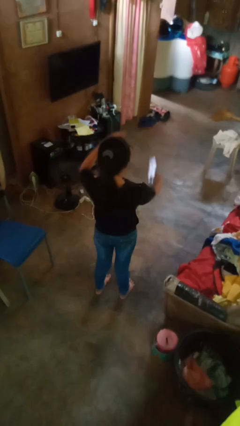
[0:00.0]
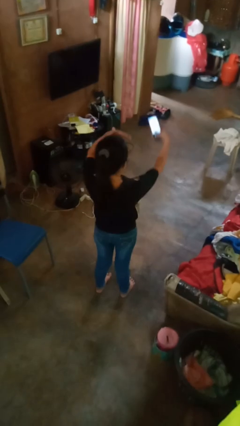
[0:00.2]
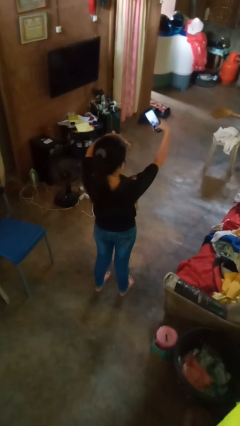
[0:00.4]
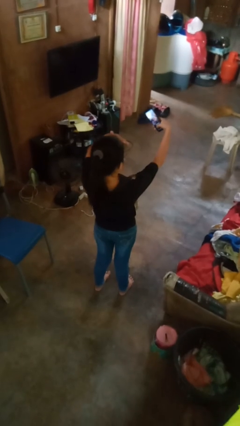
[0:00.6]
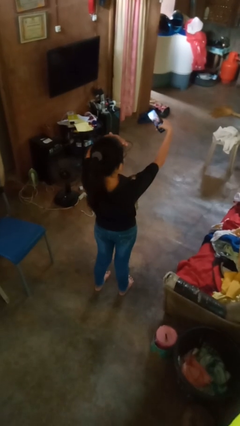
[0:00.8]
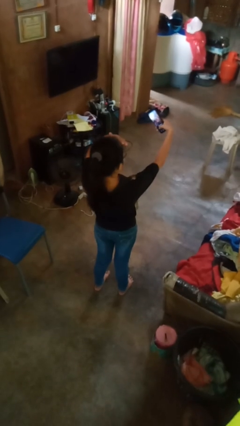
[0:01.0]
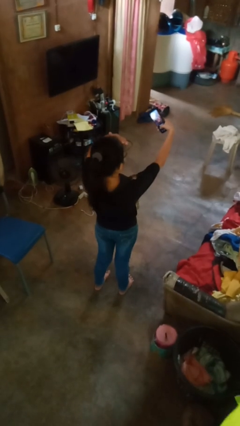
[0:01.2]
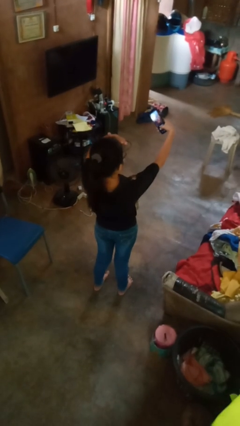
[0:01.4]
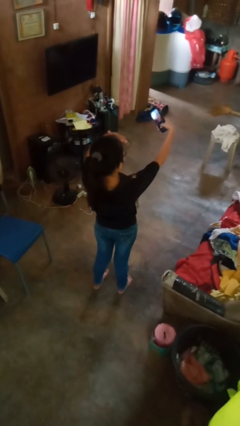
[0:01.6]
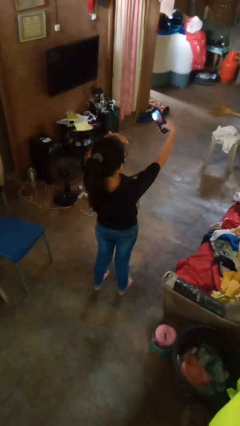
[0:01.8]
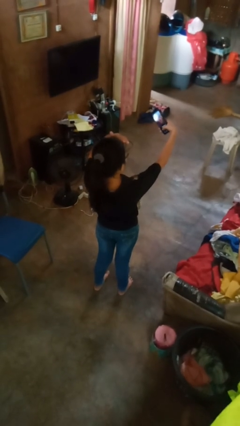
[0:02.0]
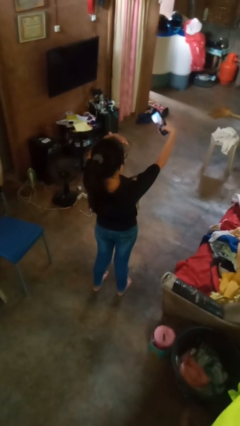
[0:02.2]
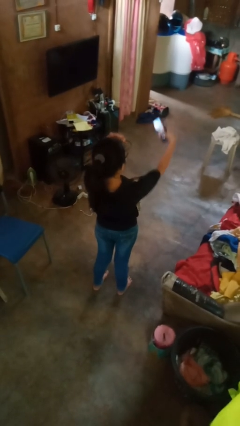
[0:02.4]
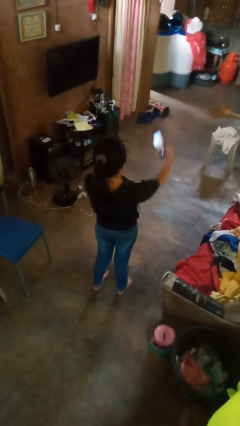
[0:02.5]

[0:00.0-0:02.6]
person takes selfie

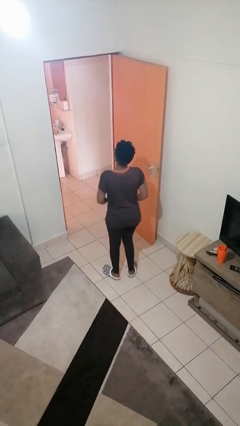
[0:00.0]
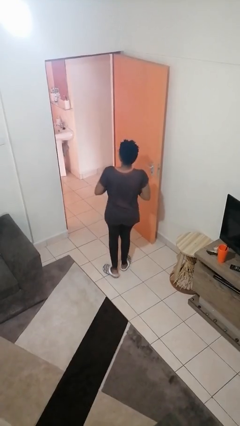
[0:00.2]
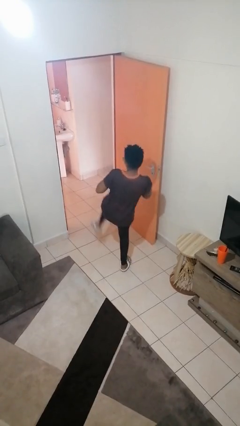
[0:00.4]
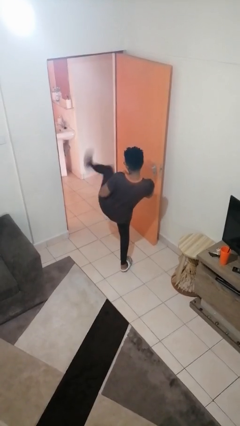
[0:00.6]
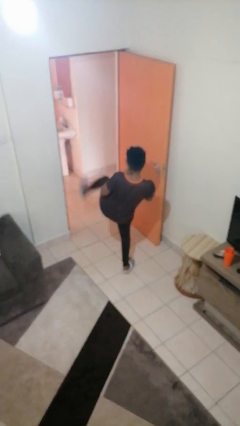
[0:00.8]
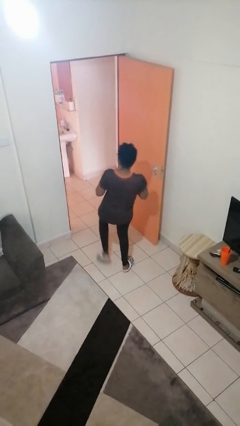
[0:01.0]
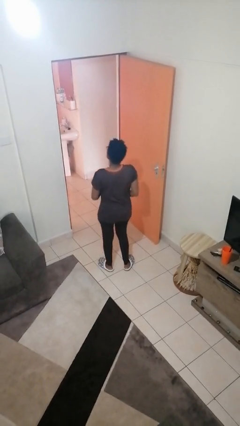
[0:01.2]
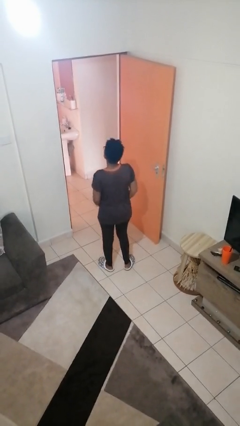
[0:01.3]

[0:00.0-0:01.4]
person karate kicks

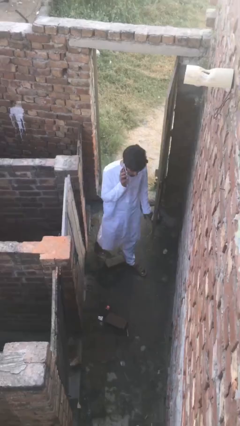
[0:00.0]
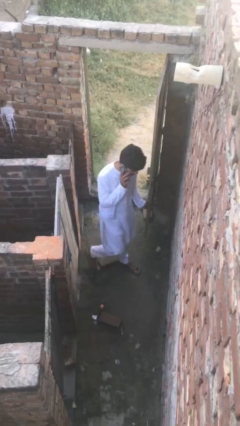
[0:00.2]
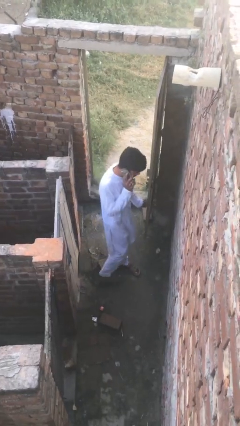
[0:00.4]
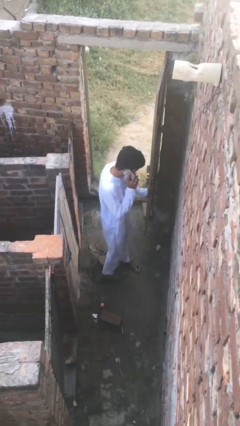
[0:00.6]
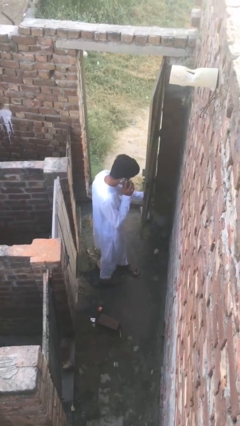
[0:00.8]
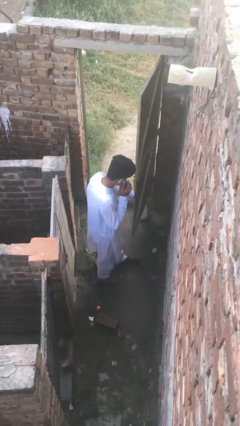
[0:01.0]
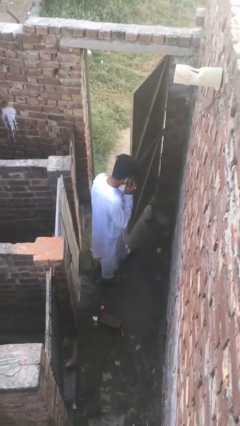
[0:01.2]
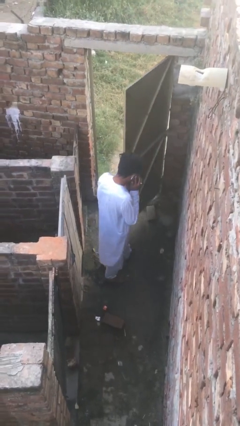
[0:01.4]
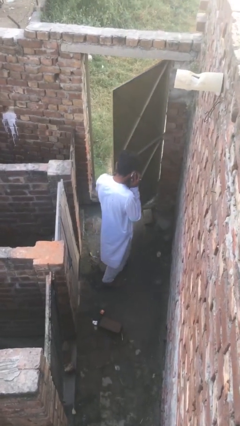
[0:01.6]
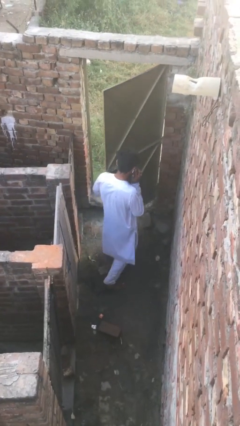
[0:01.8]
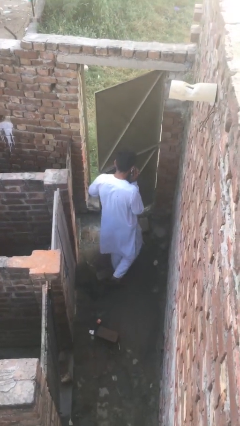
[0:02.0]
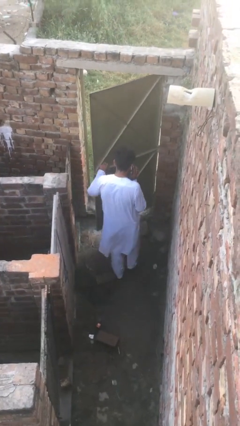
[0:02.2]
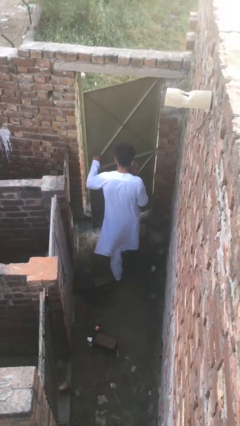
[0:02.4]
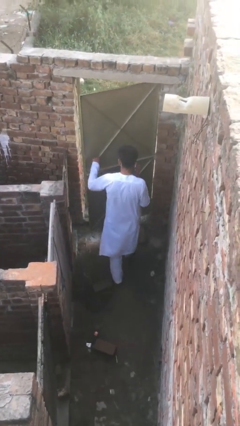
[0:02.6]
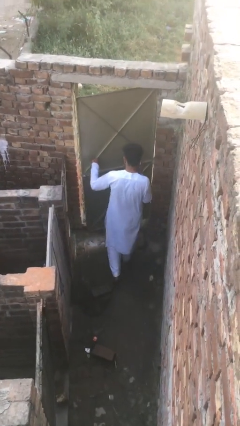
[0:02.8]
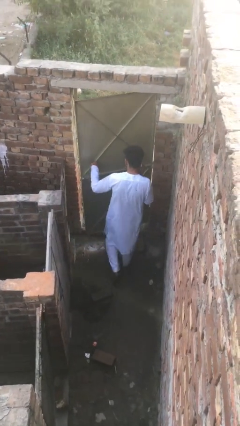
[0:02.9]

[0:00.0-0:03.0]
person closes facility door

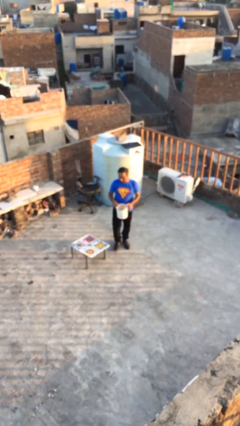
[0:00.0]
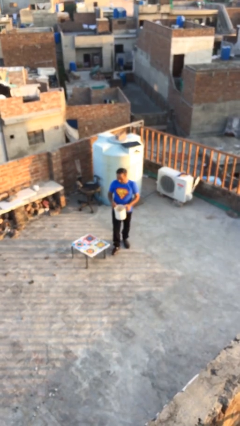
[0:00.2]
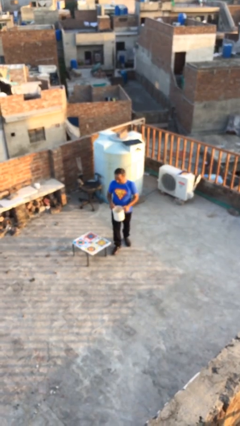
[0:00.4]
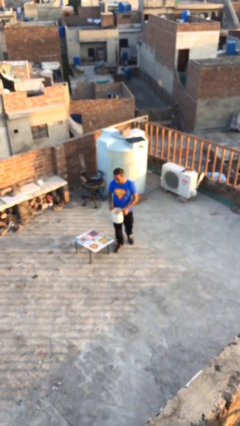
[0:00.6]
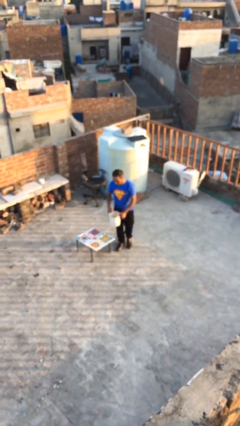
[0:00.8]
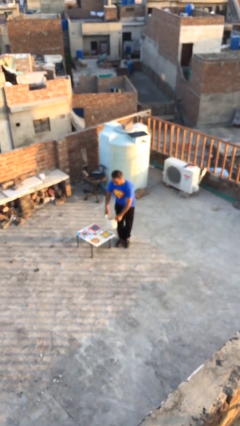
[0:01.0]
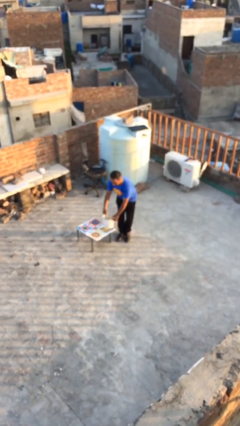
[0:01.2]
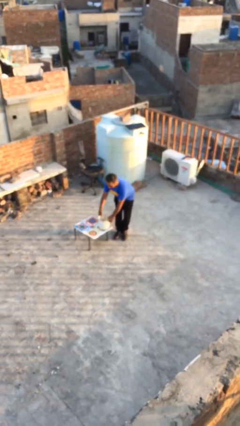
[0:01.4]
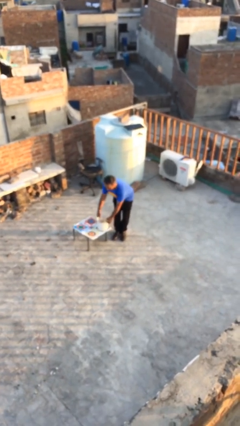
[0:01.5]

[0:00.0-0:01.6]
person puts down object on table

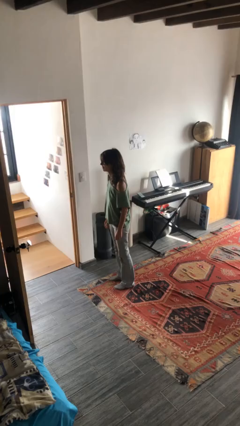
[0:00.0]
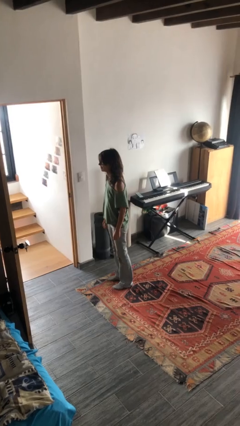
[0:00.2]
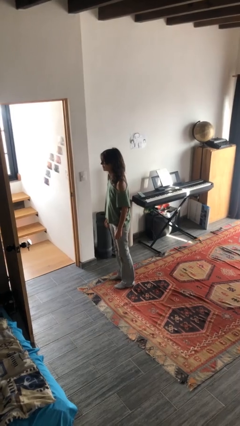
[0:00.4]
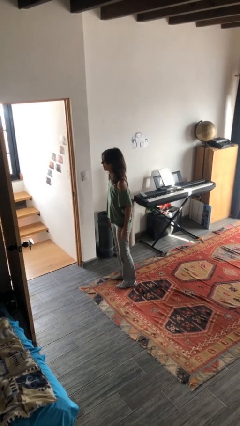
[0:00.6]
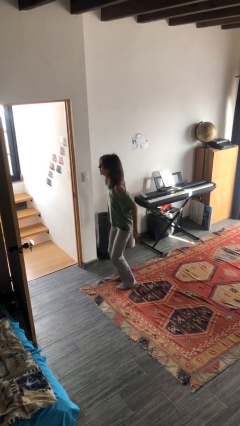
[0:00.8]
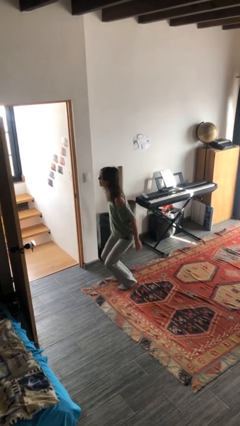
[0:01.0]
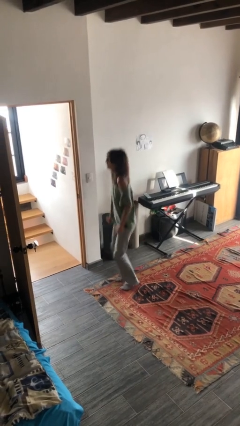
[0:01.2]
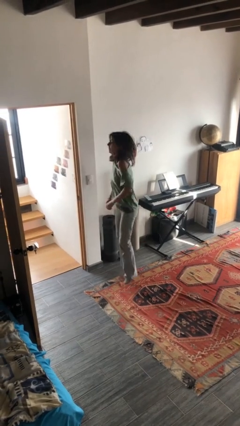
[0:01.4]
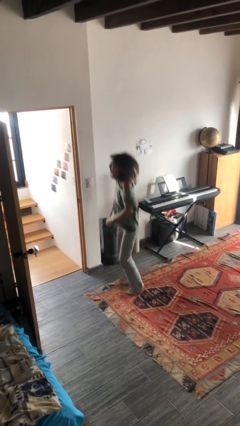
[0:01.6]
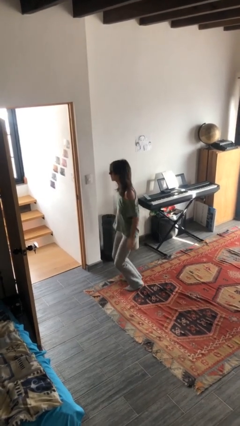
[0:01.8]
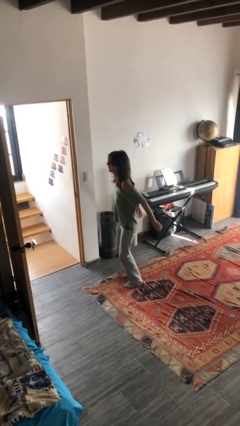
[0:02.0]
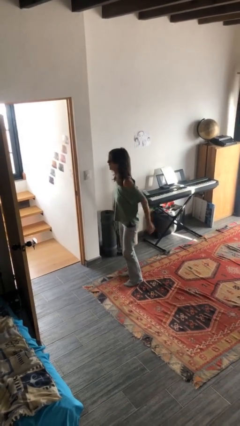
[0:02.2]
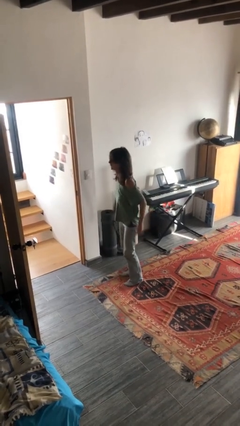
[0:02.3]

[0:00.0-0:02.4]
person jumps

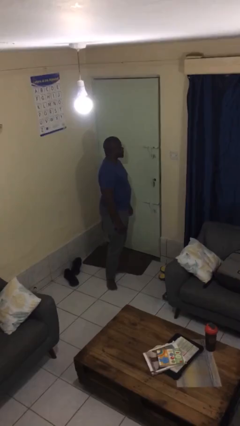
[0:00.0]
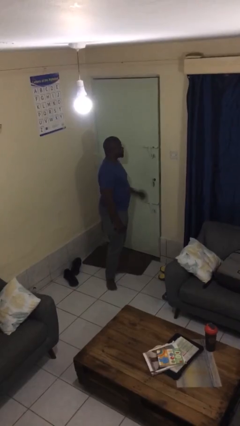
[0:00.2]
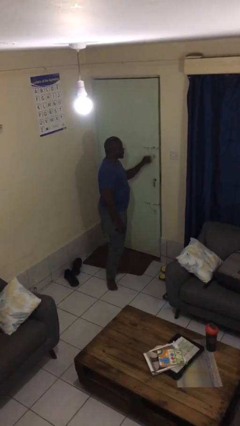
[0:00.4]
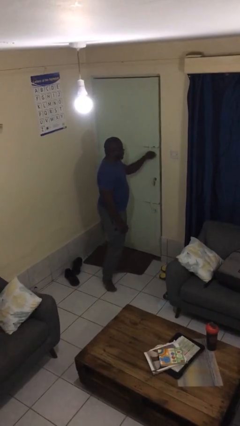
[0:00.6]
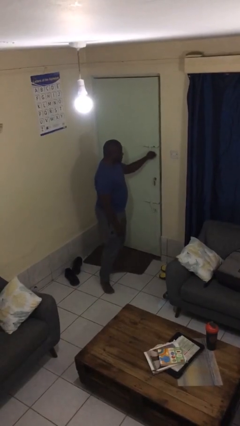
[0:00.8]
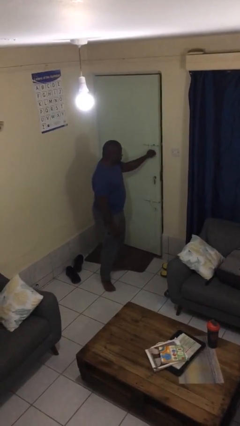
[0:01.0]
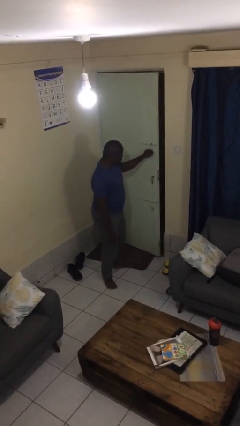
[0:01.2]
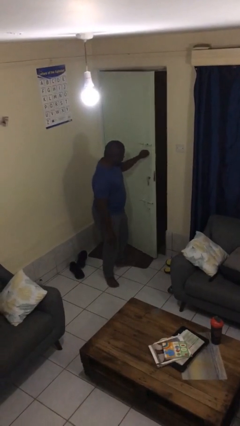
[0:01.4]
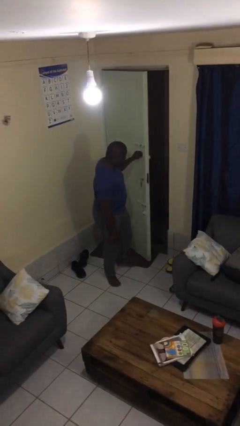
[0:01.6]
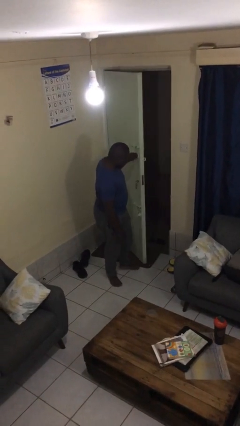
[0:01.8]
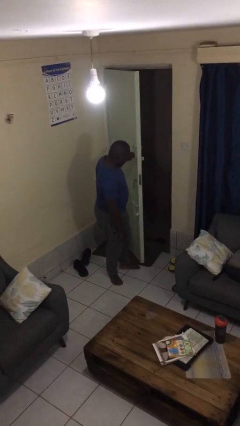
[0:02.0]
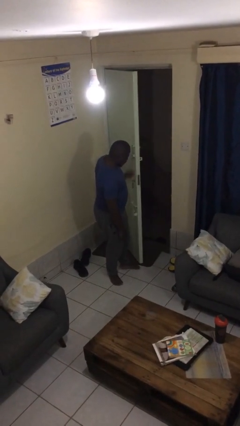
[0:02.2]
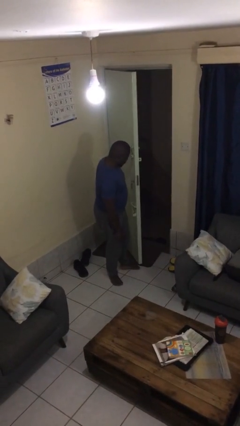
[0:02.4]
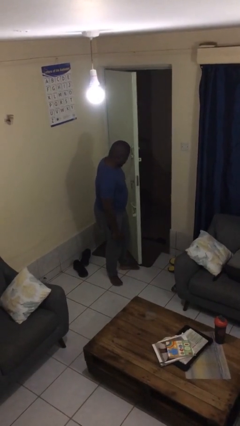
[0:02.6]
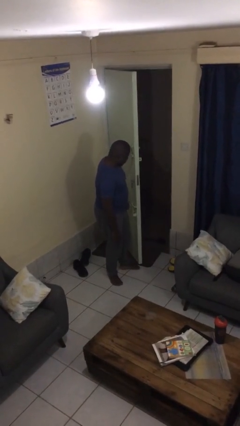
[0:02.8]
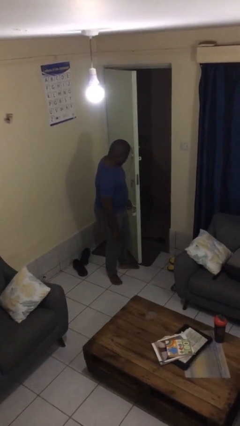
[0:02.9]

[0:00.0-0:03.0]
person opens facility door

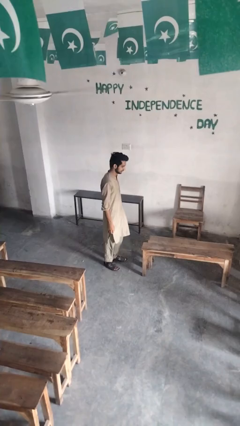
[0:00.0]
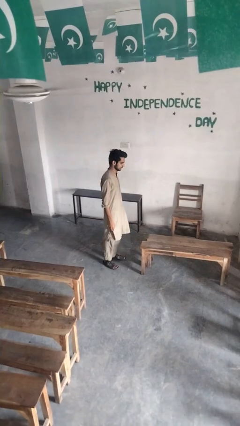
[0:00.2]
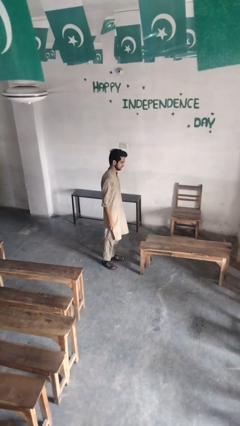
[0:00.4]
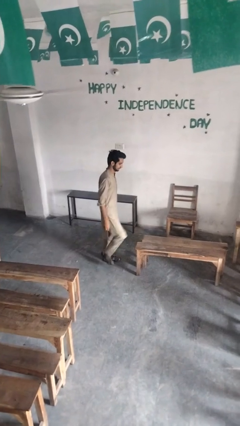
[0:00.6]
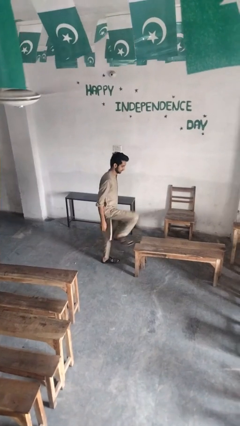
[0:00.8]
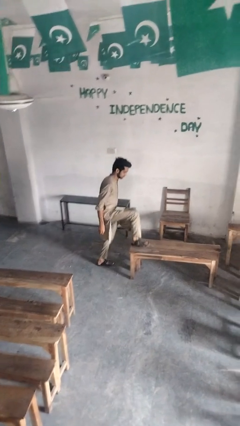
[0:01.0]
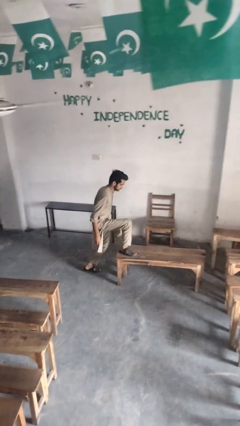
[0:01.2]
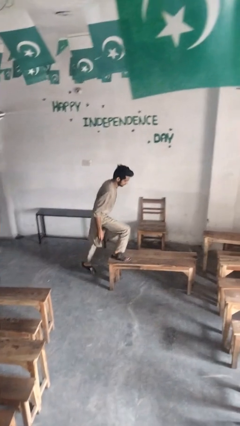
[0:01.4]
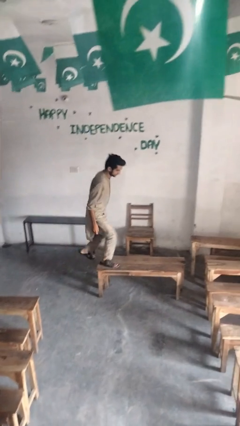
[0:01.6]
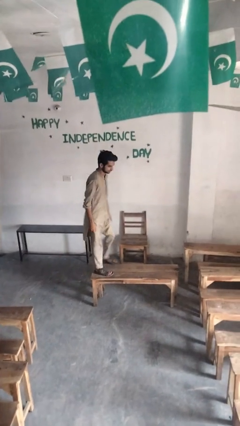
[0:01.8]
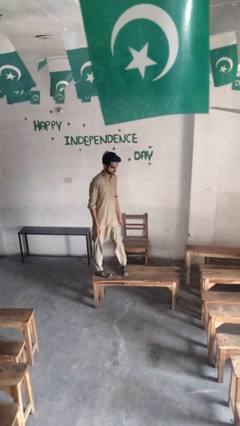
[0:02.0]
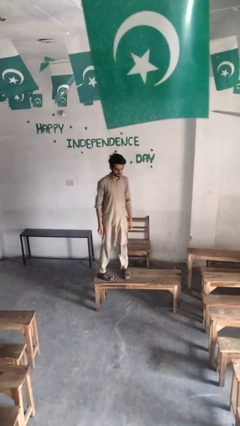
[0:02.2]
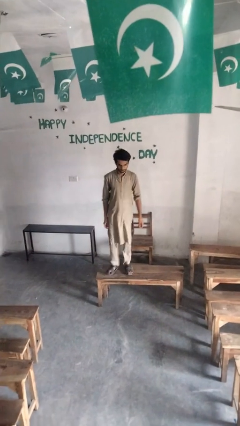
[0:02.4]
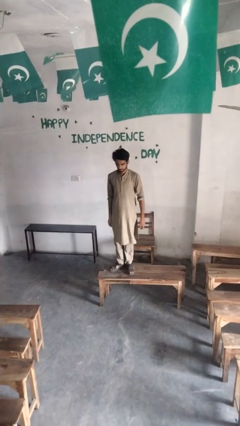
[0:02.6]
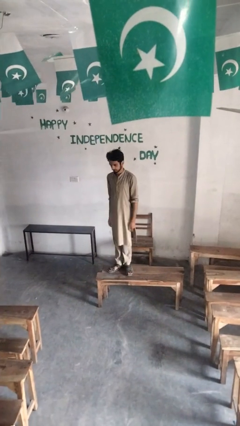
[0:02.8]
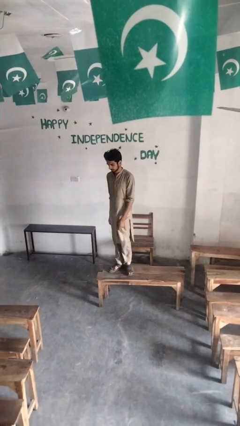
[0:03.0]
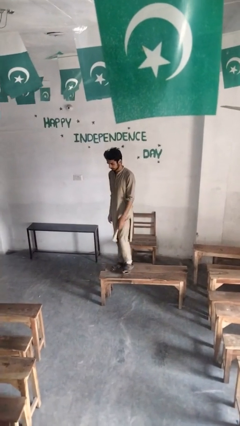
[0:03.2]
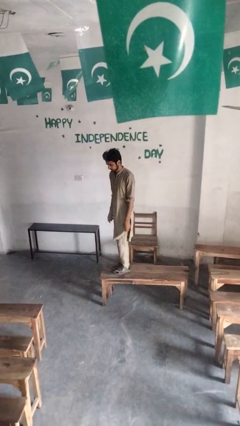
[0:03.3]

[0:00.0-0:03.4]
person climbs on table
